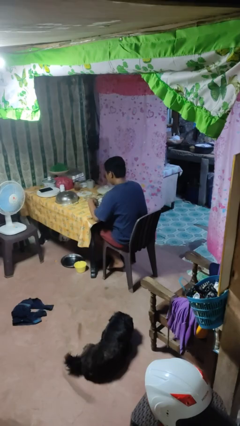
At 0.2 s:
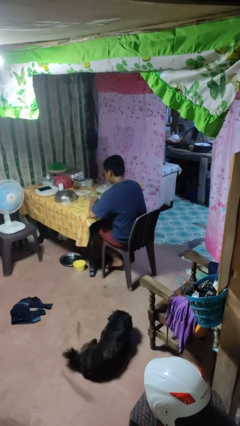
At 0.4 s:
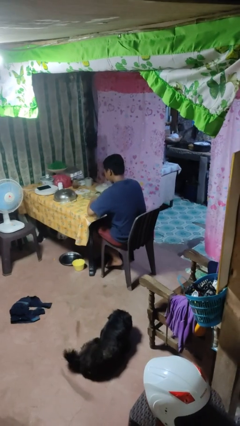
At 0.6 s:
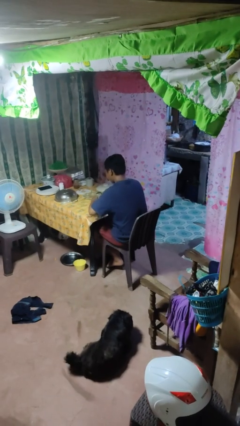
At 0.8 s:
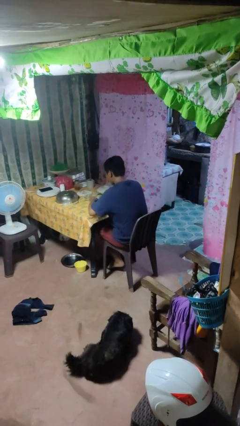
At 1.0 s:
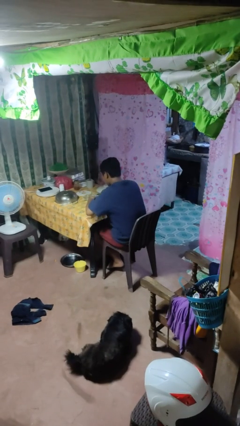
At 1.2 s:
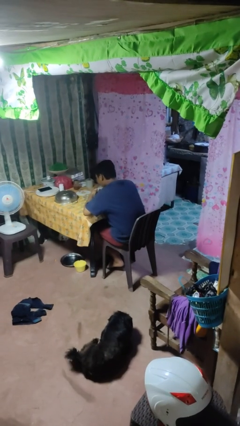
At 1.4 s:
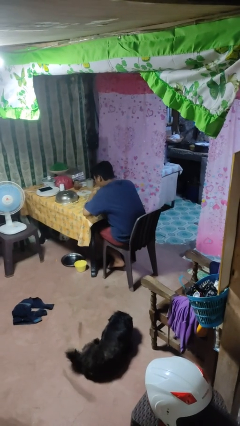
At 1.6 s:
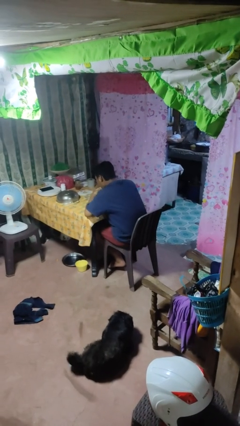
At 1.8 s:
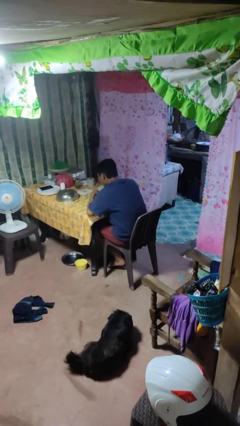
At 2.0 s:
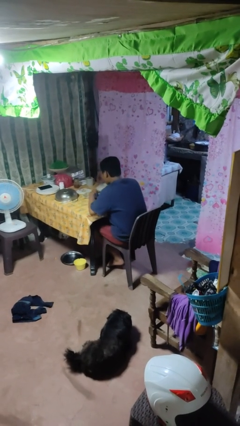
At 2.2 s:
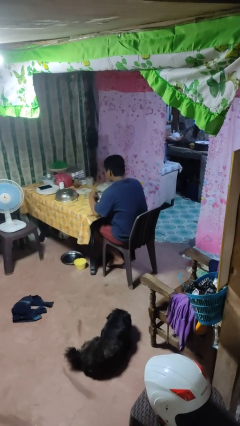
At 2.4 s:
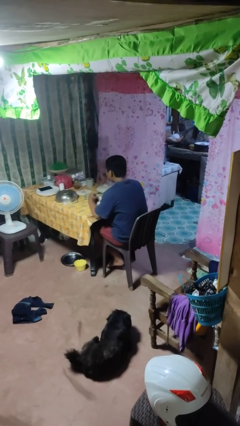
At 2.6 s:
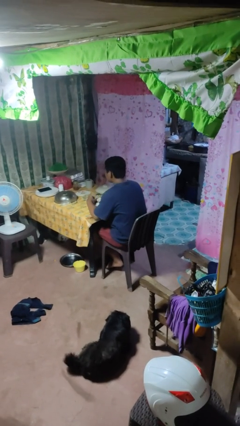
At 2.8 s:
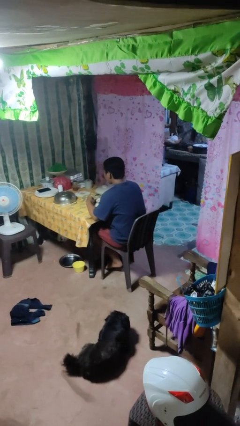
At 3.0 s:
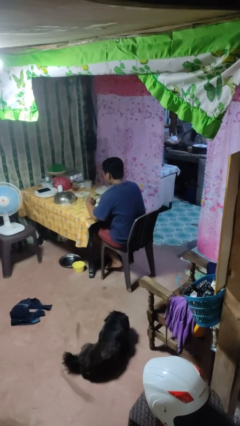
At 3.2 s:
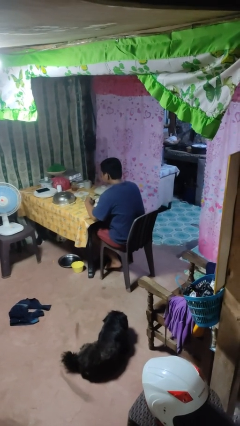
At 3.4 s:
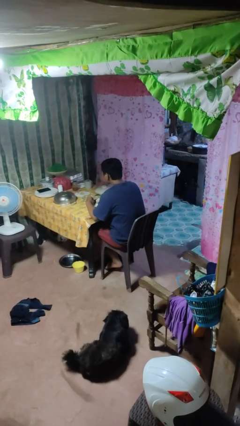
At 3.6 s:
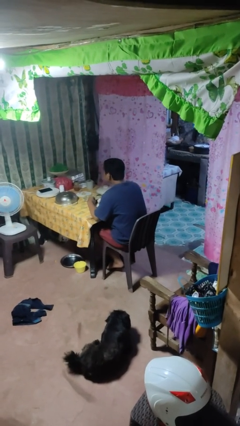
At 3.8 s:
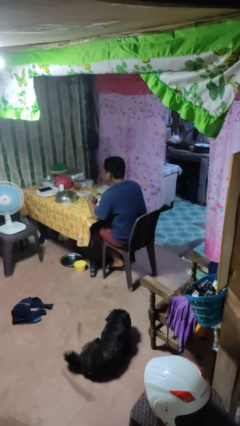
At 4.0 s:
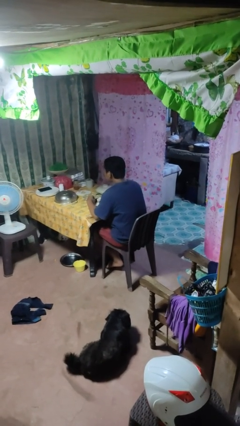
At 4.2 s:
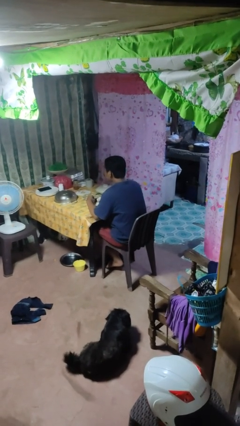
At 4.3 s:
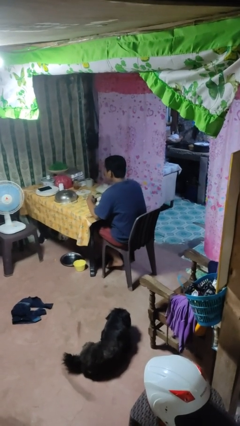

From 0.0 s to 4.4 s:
person eats with hands

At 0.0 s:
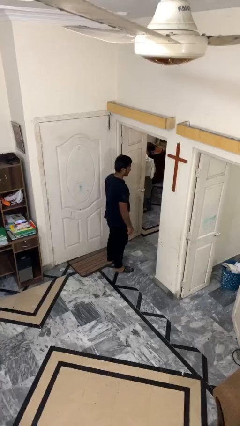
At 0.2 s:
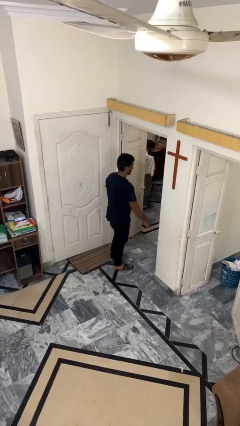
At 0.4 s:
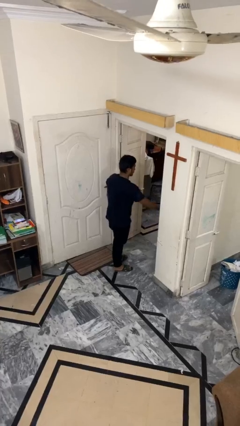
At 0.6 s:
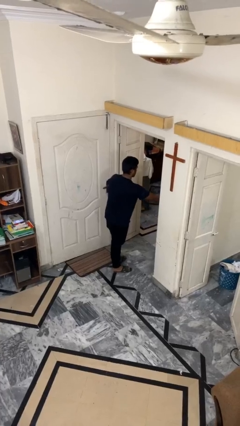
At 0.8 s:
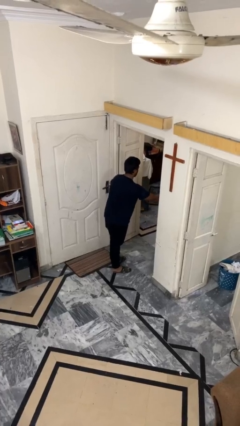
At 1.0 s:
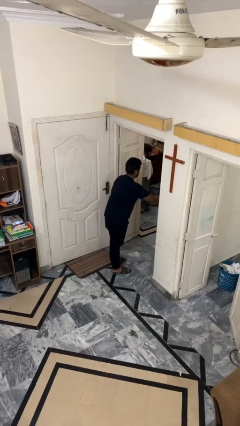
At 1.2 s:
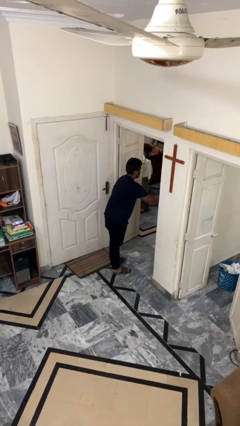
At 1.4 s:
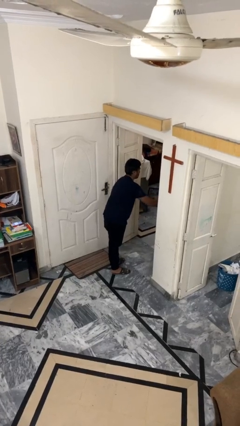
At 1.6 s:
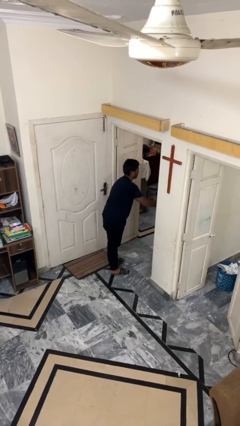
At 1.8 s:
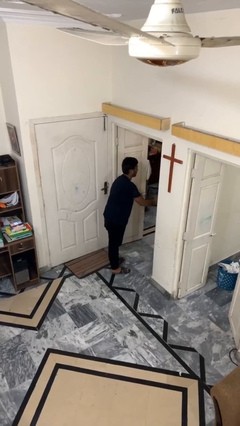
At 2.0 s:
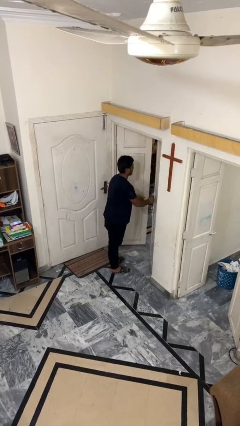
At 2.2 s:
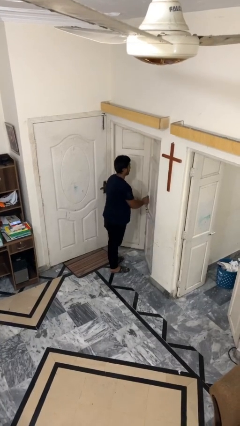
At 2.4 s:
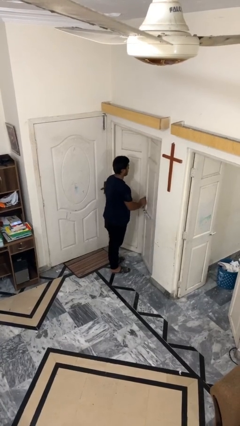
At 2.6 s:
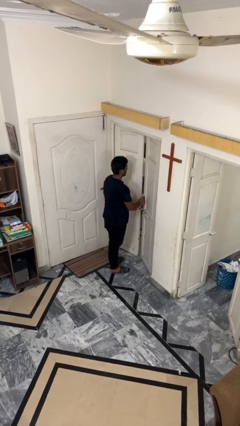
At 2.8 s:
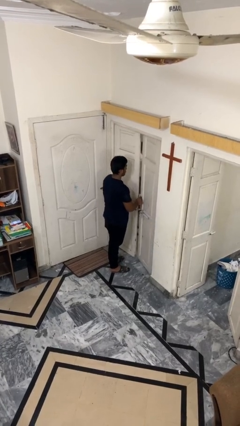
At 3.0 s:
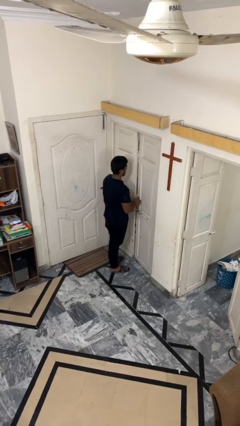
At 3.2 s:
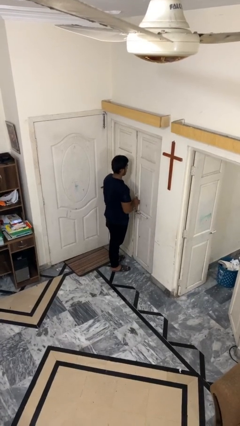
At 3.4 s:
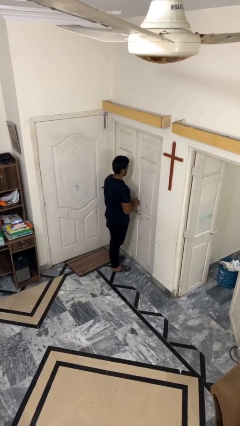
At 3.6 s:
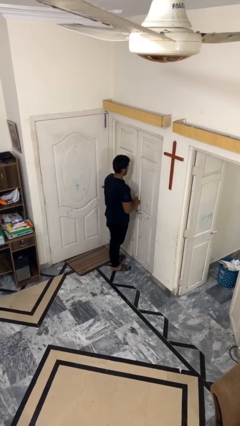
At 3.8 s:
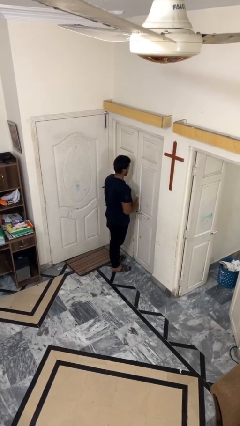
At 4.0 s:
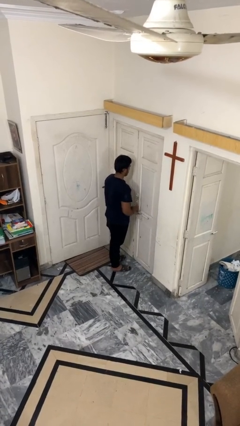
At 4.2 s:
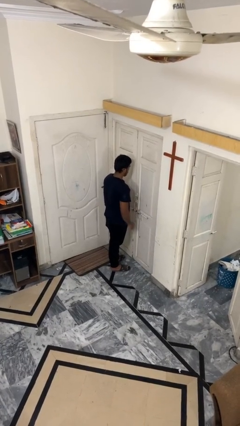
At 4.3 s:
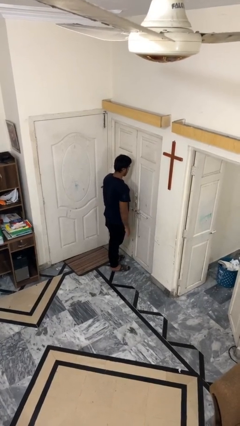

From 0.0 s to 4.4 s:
person closes facility door

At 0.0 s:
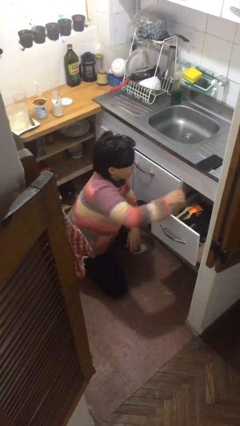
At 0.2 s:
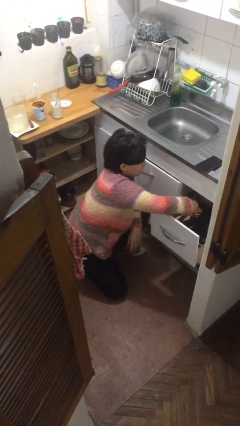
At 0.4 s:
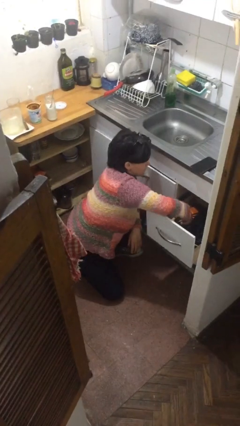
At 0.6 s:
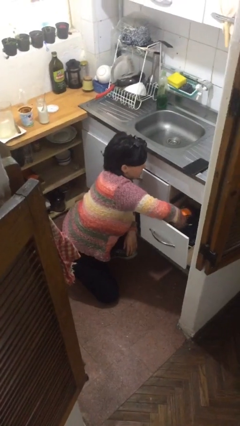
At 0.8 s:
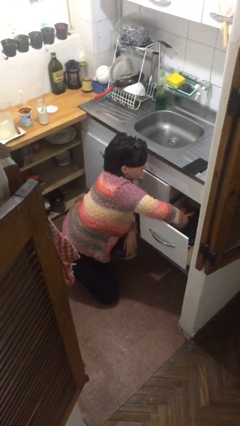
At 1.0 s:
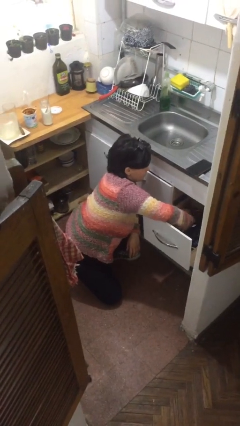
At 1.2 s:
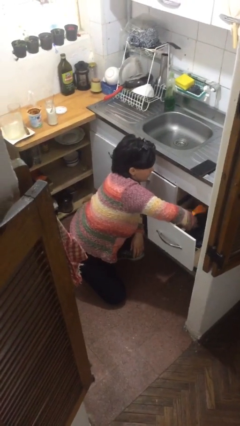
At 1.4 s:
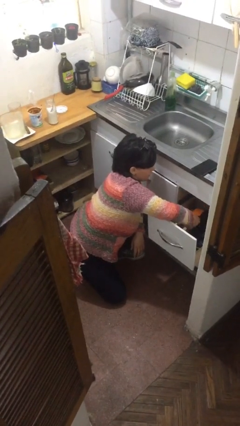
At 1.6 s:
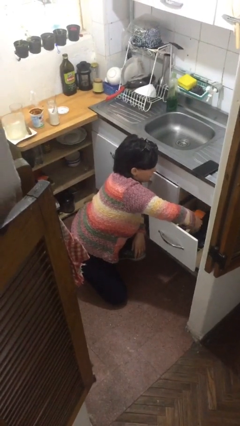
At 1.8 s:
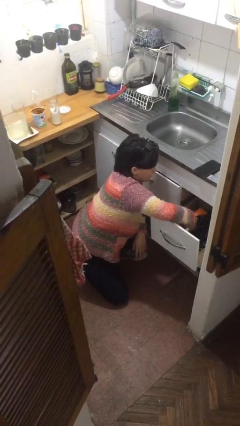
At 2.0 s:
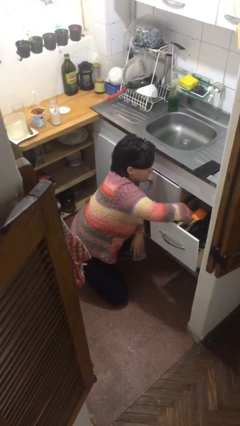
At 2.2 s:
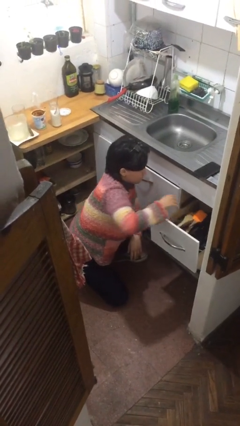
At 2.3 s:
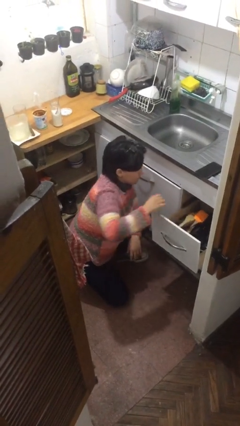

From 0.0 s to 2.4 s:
person searches in kitchen drawer

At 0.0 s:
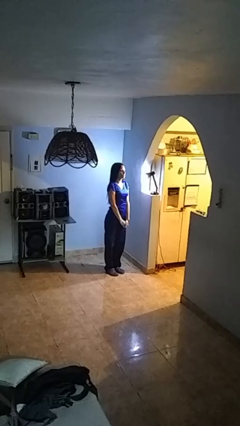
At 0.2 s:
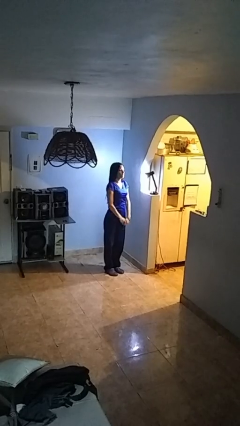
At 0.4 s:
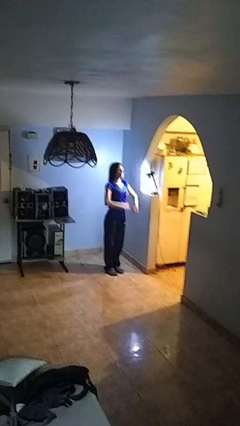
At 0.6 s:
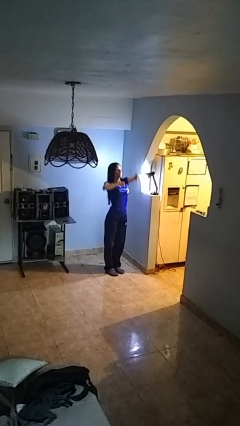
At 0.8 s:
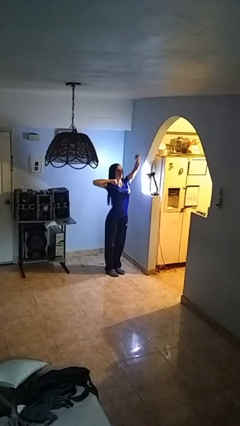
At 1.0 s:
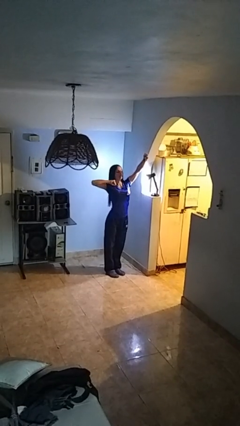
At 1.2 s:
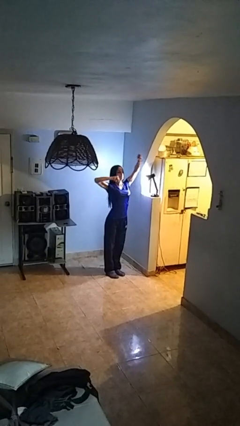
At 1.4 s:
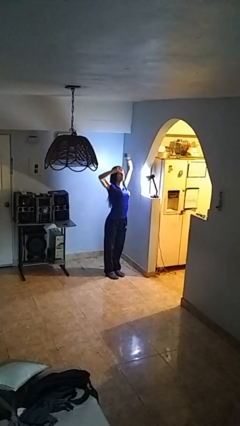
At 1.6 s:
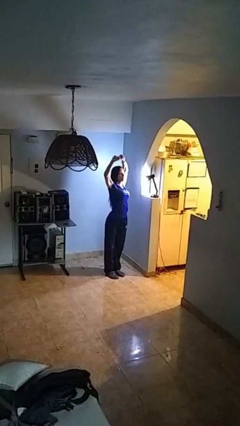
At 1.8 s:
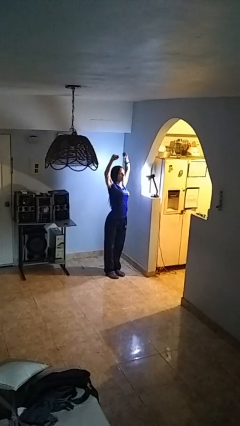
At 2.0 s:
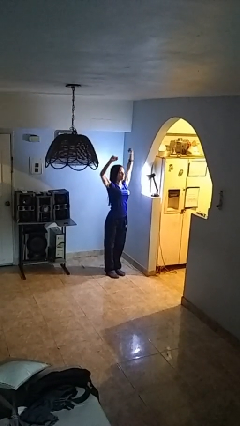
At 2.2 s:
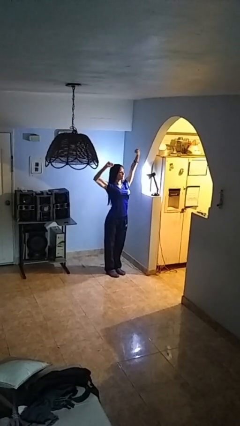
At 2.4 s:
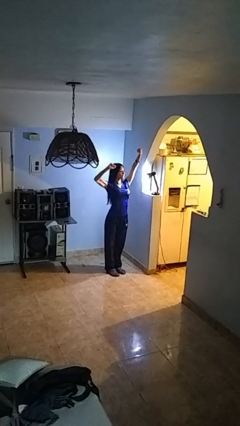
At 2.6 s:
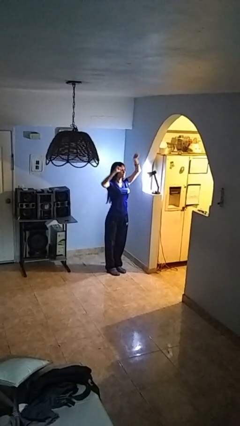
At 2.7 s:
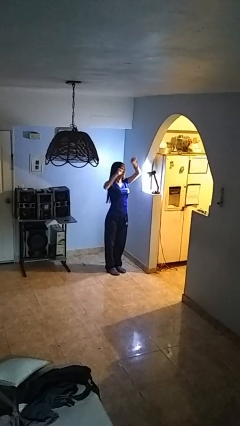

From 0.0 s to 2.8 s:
person stretches arms over head

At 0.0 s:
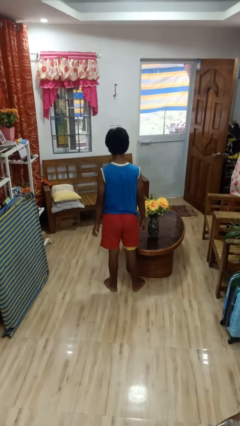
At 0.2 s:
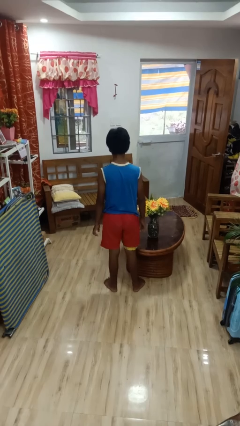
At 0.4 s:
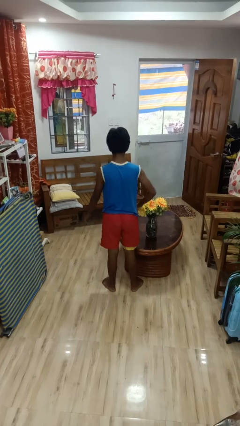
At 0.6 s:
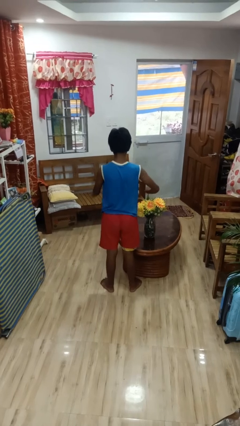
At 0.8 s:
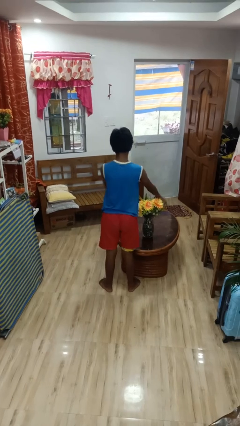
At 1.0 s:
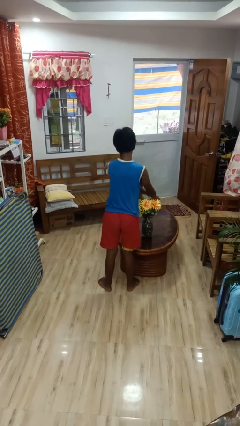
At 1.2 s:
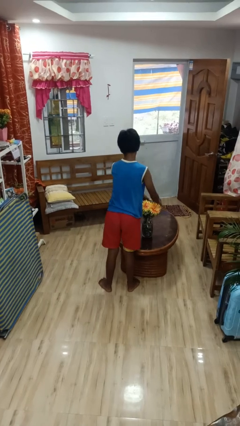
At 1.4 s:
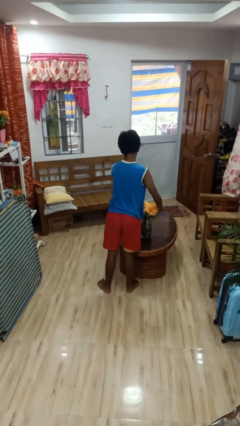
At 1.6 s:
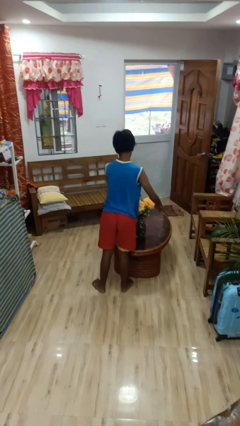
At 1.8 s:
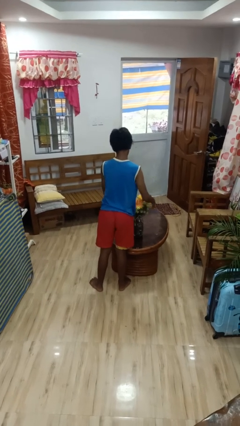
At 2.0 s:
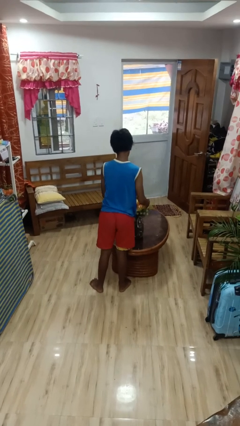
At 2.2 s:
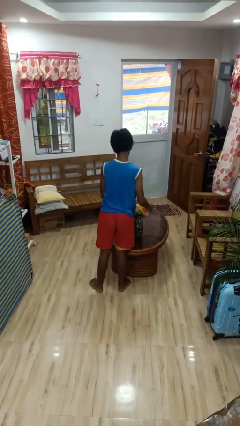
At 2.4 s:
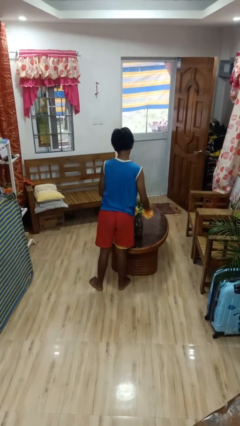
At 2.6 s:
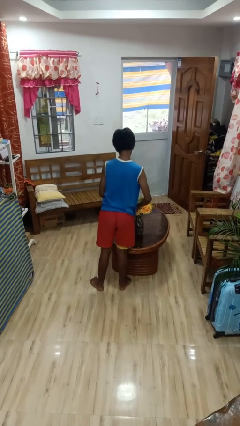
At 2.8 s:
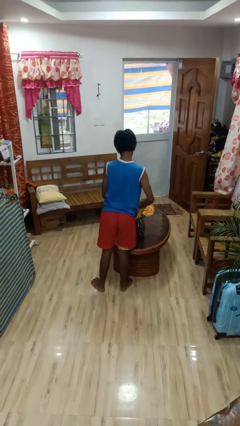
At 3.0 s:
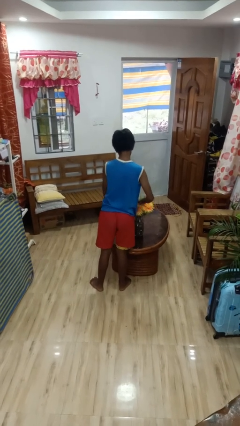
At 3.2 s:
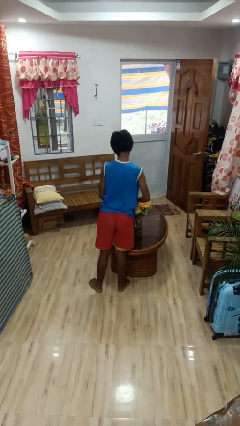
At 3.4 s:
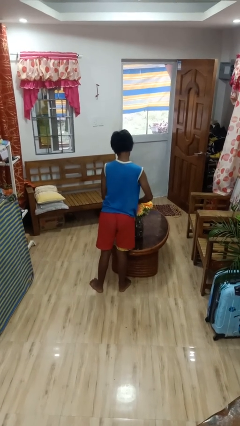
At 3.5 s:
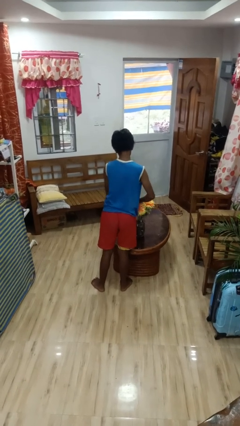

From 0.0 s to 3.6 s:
person arranges flowers in vase
